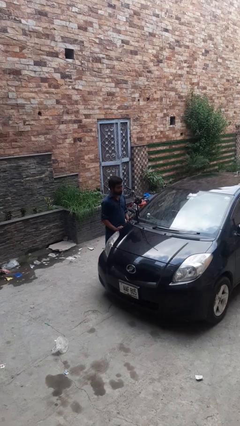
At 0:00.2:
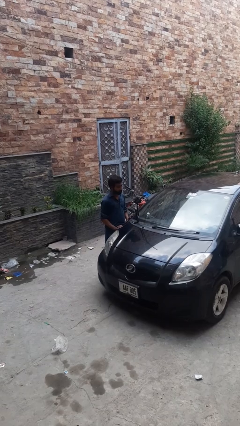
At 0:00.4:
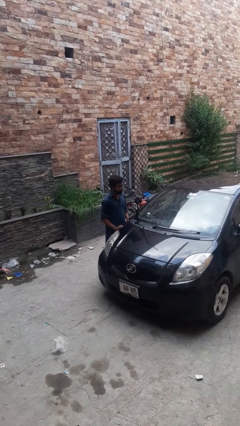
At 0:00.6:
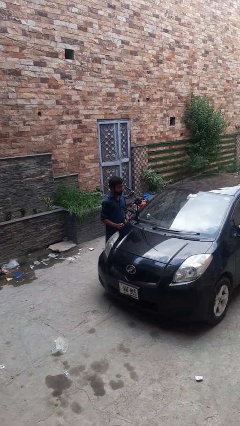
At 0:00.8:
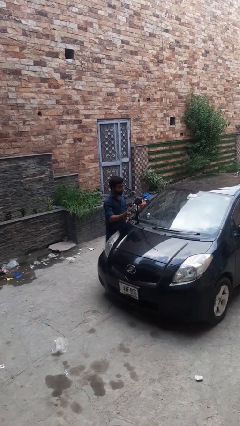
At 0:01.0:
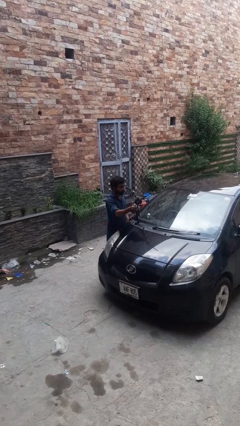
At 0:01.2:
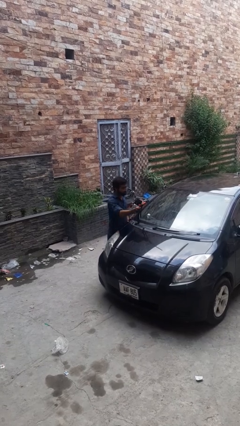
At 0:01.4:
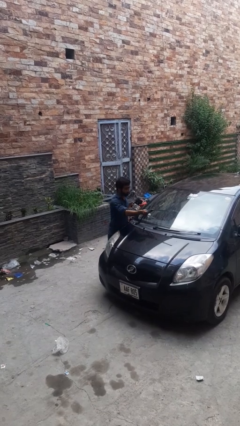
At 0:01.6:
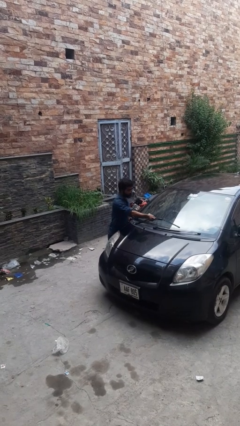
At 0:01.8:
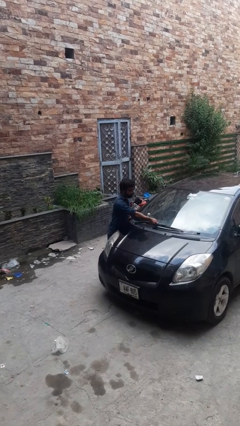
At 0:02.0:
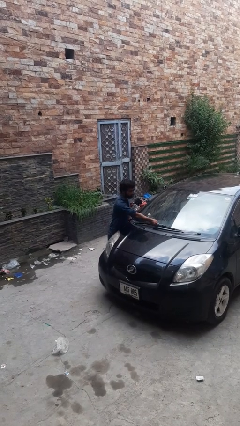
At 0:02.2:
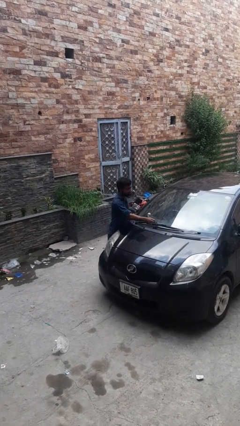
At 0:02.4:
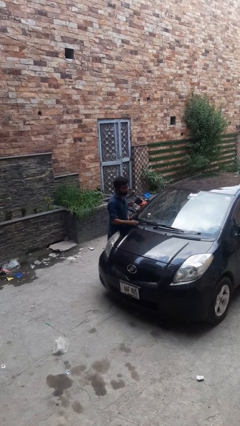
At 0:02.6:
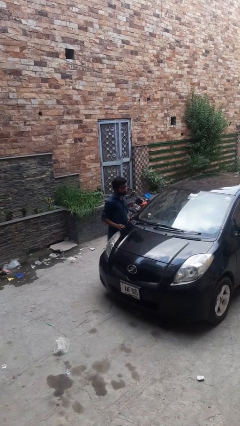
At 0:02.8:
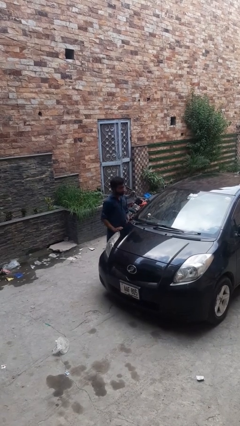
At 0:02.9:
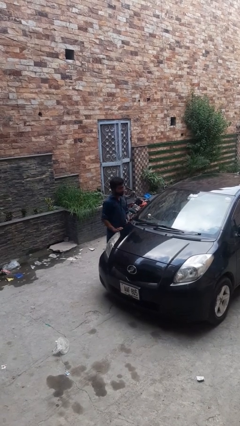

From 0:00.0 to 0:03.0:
person flips down car wipers

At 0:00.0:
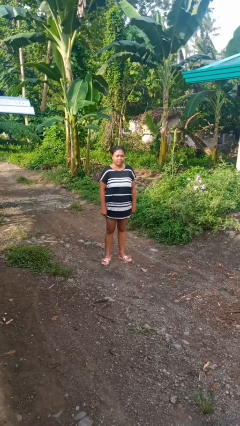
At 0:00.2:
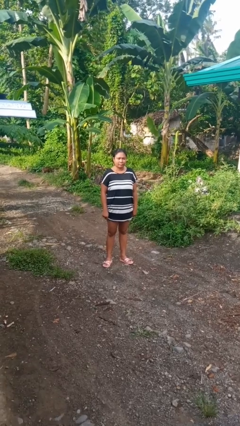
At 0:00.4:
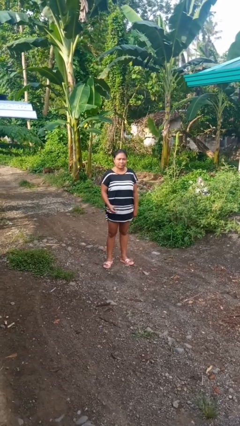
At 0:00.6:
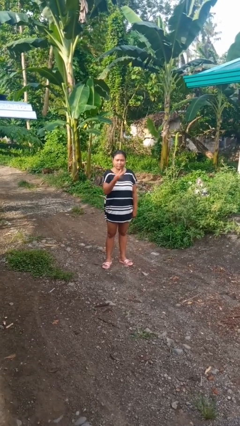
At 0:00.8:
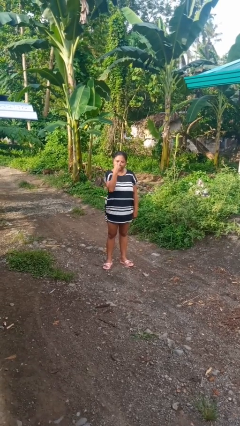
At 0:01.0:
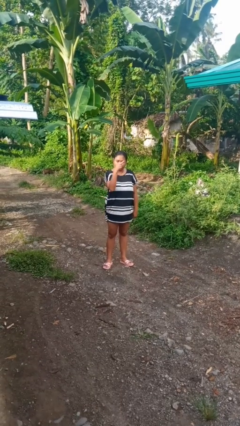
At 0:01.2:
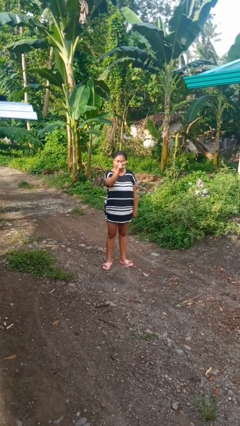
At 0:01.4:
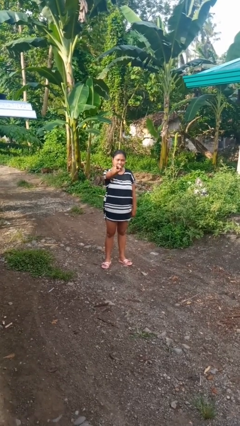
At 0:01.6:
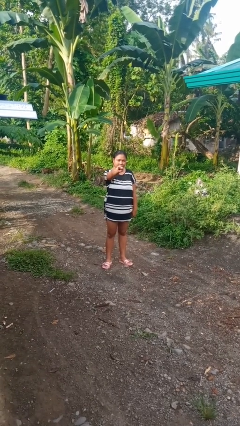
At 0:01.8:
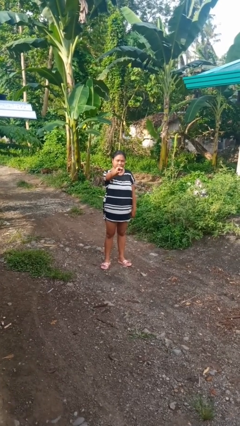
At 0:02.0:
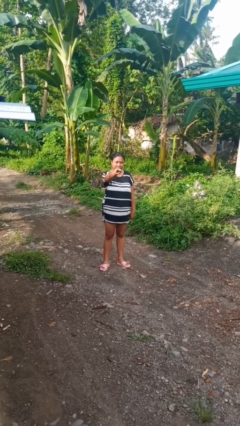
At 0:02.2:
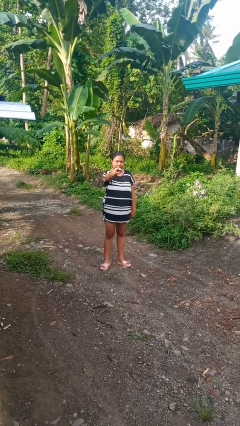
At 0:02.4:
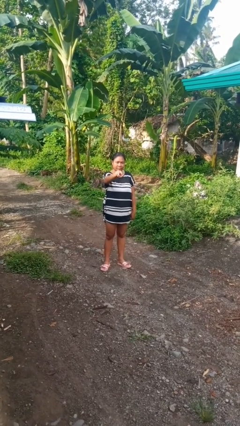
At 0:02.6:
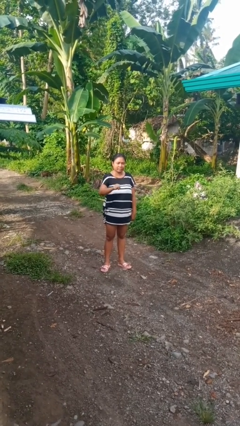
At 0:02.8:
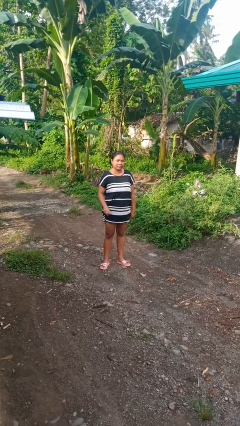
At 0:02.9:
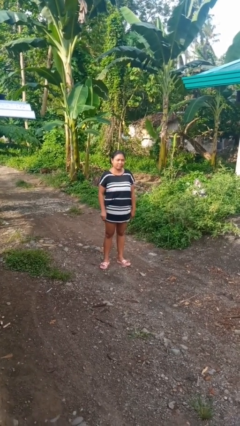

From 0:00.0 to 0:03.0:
person gestures watch closely

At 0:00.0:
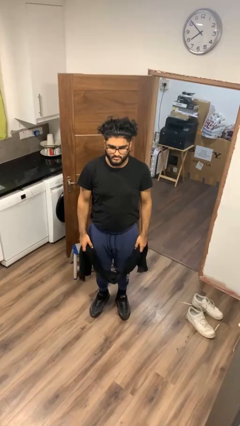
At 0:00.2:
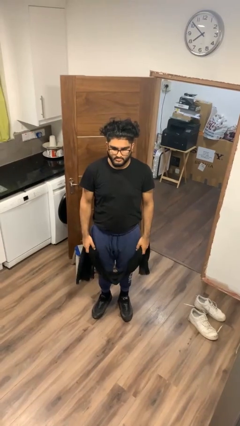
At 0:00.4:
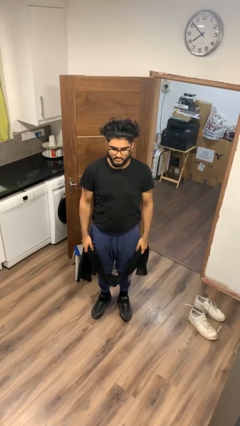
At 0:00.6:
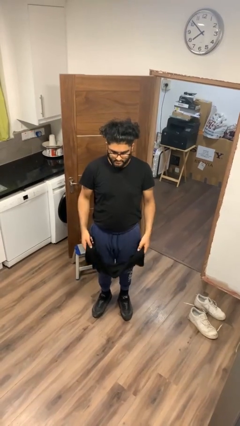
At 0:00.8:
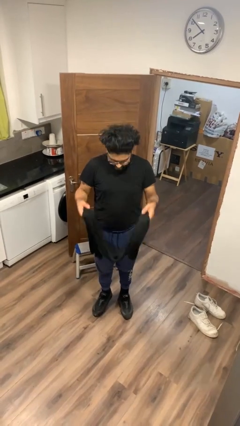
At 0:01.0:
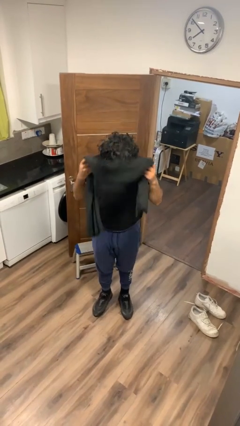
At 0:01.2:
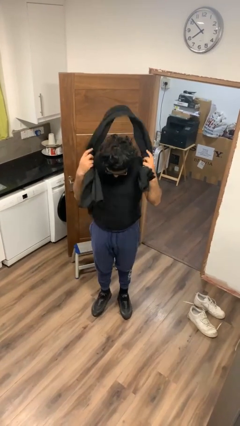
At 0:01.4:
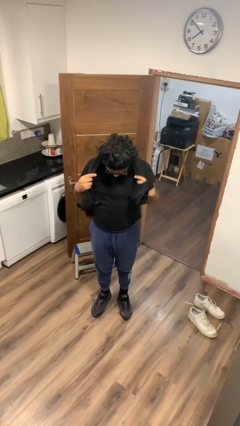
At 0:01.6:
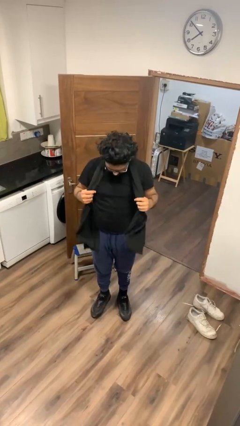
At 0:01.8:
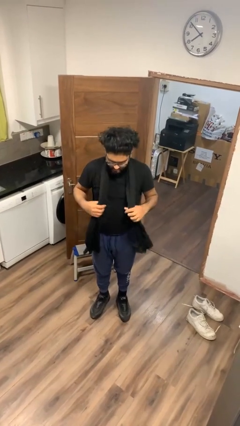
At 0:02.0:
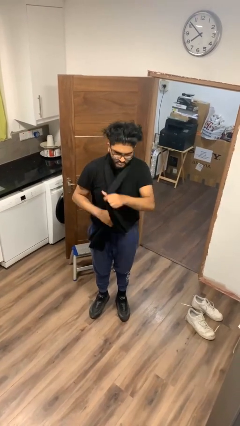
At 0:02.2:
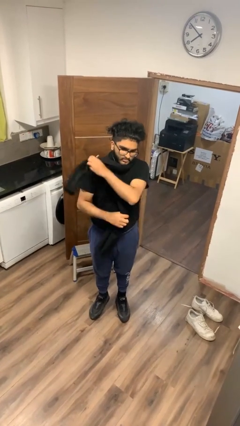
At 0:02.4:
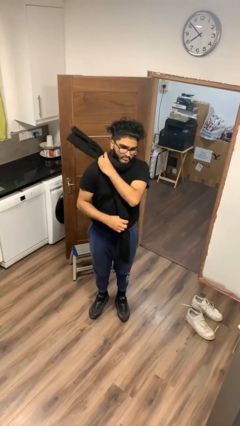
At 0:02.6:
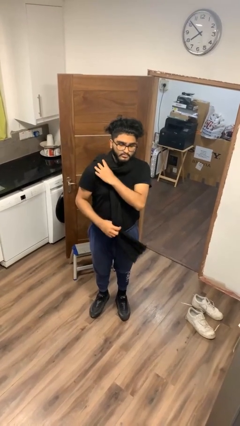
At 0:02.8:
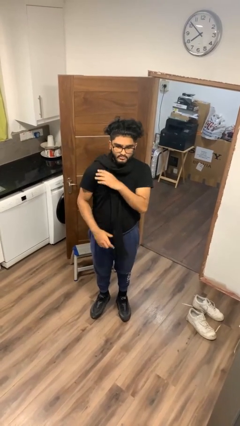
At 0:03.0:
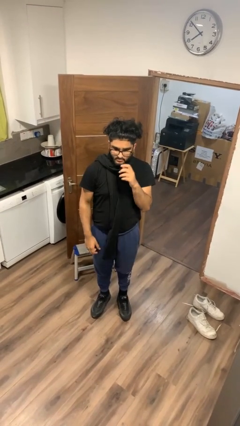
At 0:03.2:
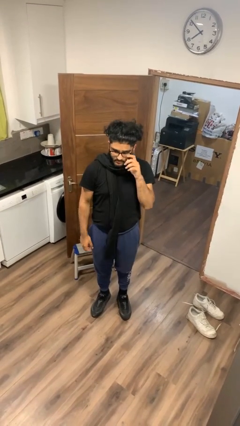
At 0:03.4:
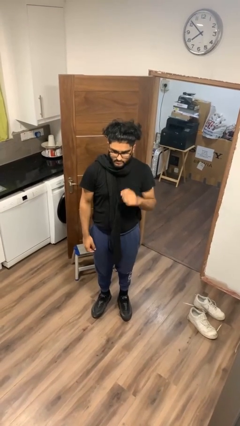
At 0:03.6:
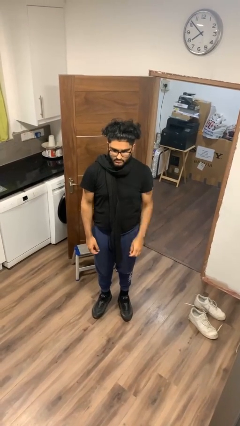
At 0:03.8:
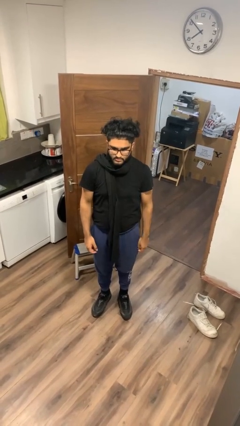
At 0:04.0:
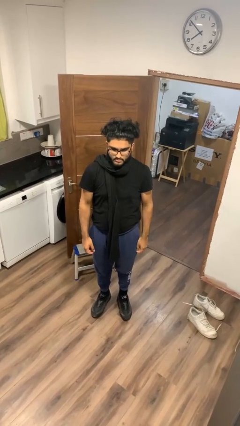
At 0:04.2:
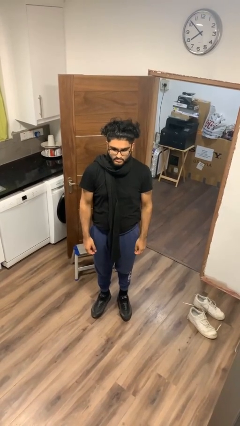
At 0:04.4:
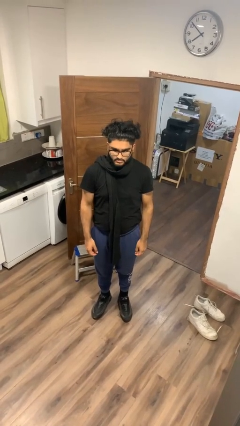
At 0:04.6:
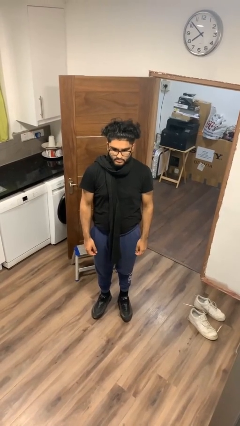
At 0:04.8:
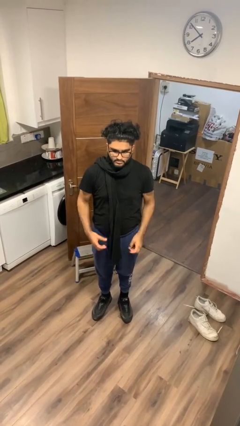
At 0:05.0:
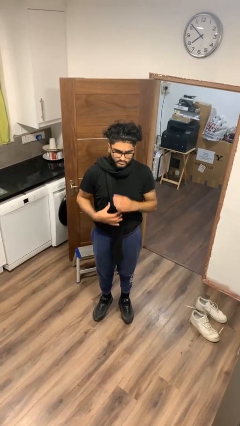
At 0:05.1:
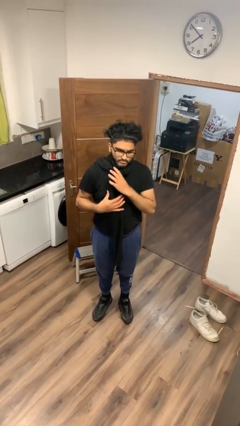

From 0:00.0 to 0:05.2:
person puts on scarf

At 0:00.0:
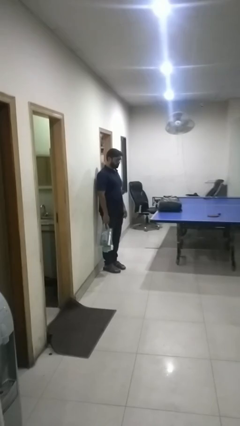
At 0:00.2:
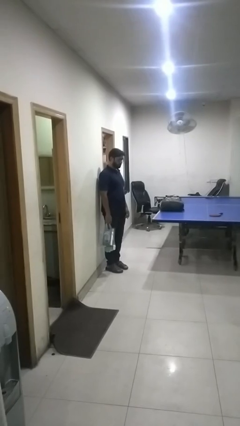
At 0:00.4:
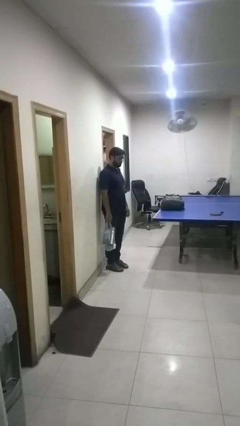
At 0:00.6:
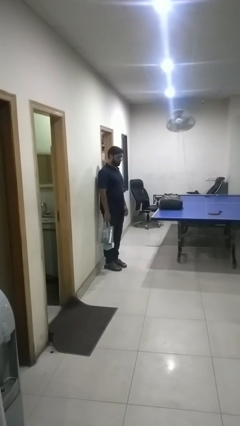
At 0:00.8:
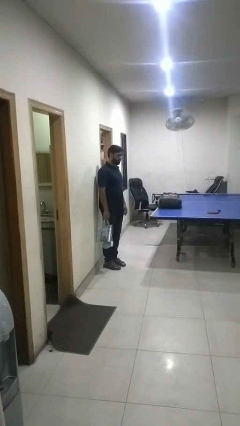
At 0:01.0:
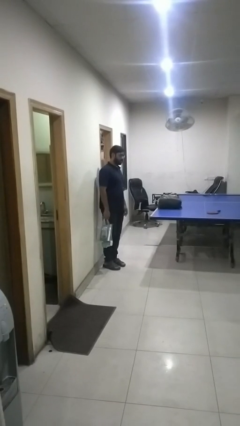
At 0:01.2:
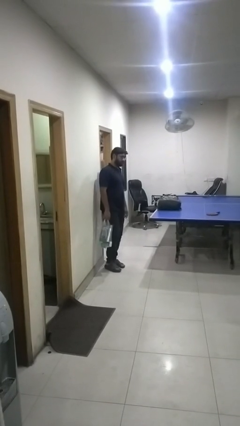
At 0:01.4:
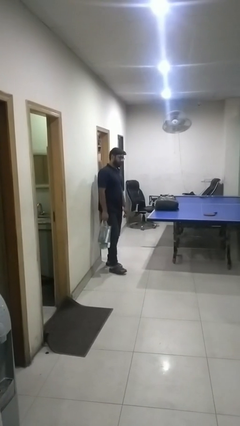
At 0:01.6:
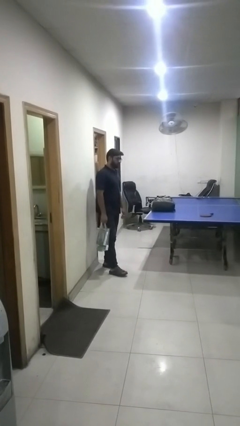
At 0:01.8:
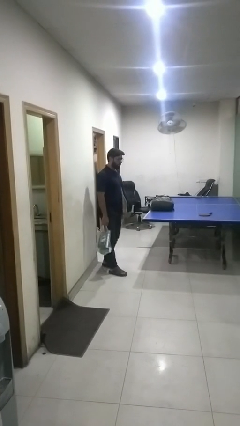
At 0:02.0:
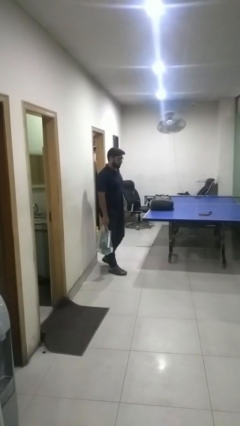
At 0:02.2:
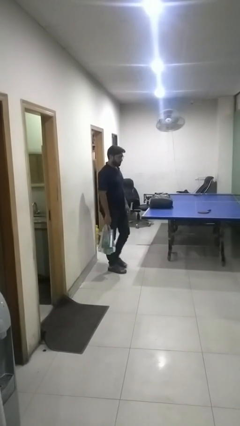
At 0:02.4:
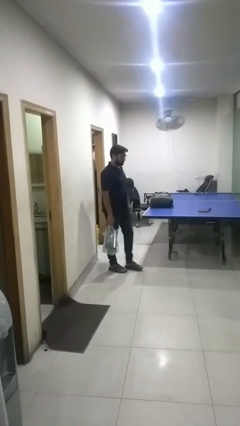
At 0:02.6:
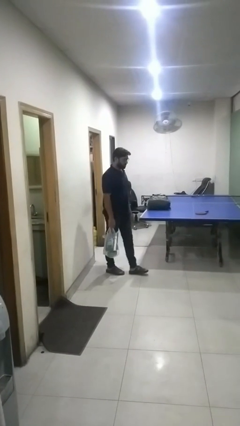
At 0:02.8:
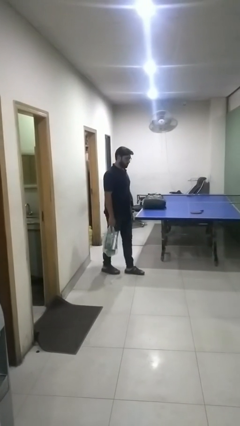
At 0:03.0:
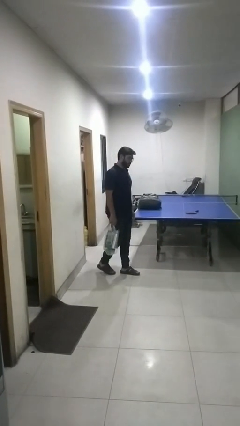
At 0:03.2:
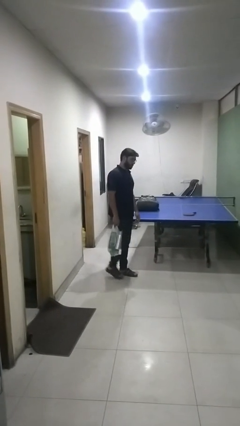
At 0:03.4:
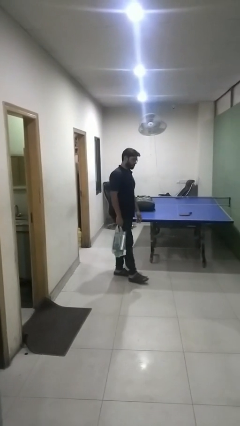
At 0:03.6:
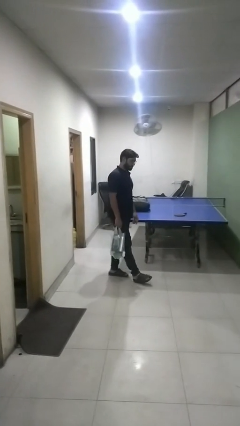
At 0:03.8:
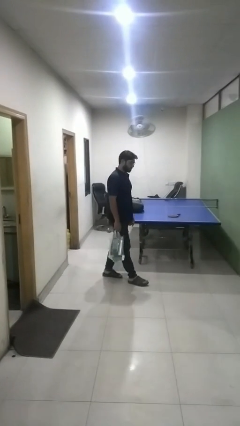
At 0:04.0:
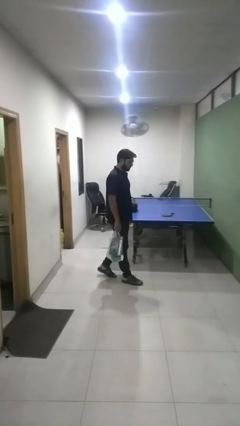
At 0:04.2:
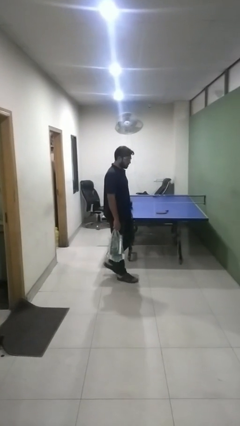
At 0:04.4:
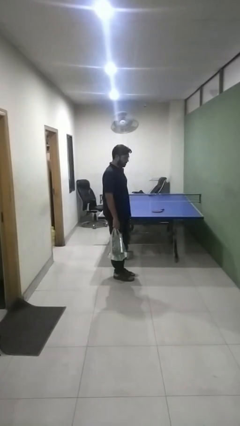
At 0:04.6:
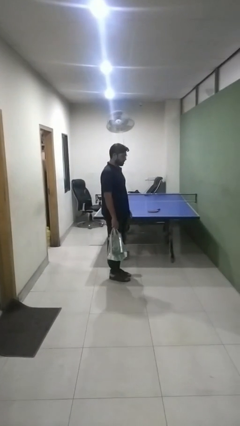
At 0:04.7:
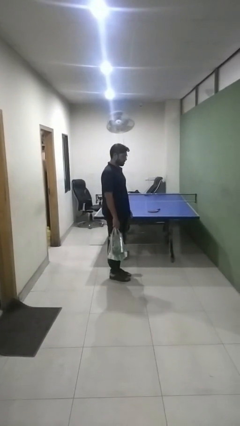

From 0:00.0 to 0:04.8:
person carries groceries

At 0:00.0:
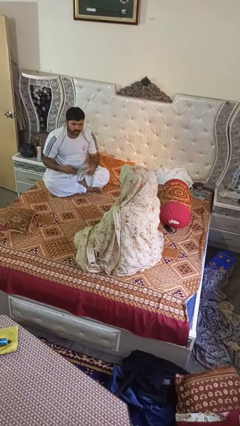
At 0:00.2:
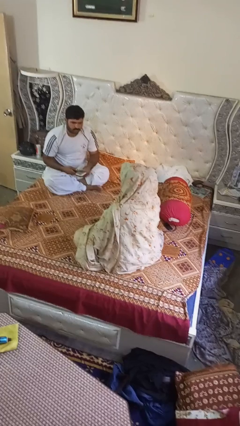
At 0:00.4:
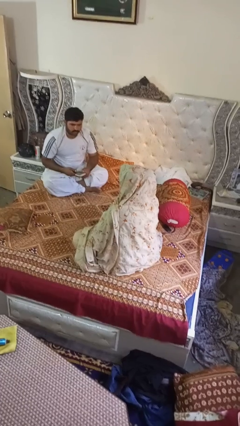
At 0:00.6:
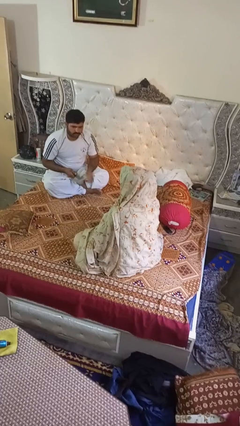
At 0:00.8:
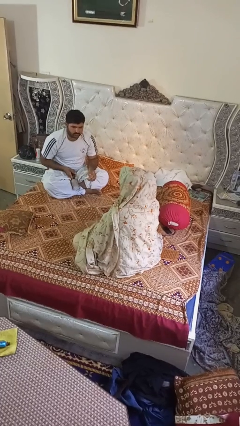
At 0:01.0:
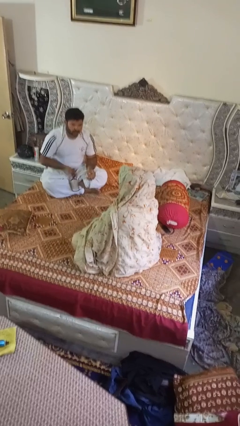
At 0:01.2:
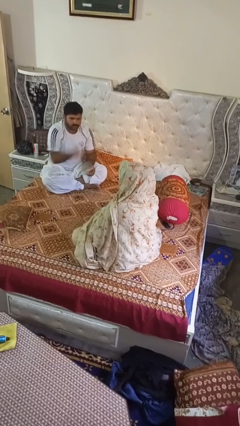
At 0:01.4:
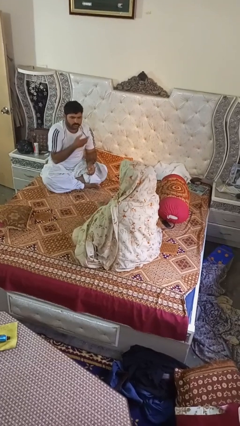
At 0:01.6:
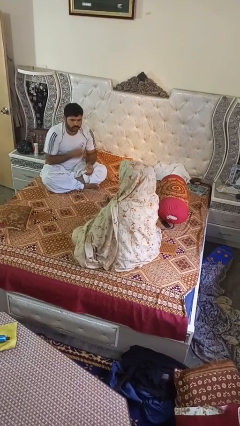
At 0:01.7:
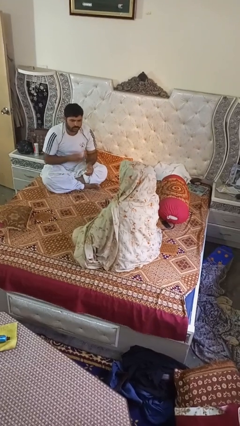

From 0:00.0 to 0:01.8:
person catches object from person
